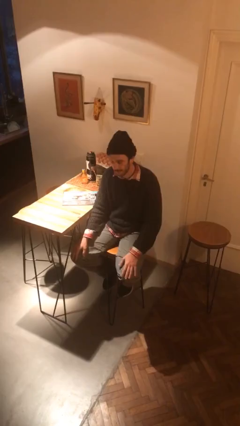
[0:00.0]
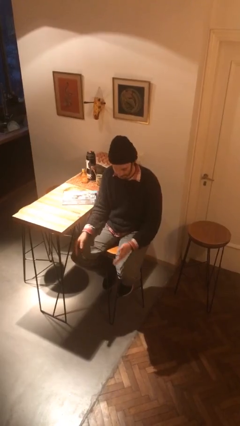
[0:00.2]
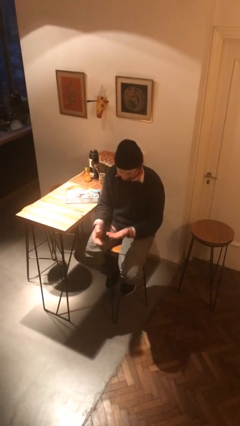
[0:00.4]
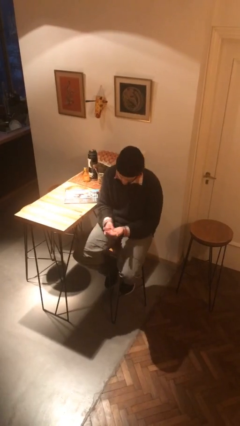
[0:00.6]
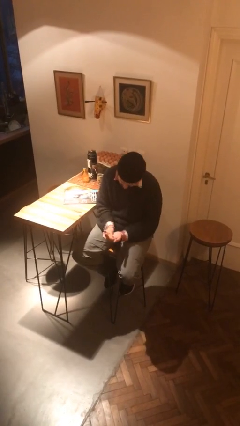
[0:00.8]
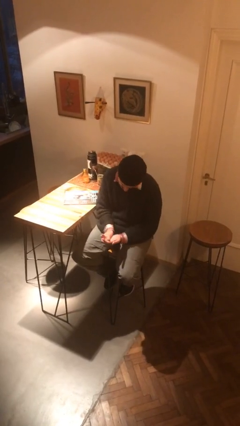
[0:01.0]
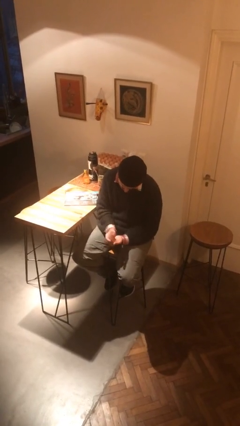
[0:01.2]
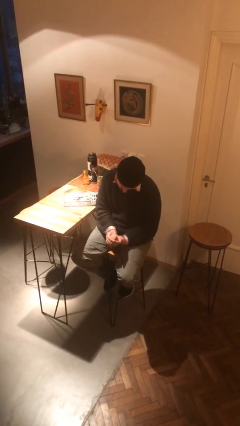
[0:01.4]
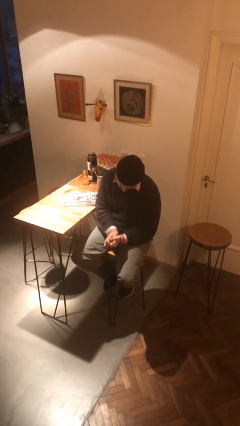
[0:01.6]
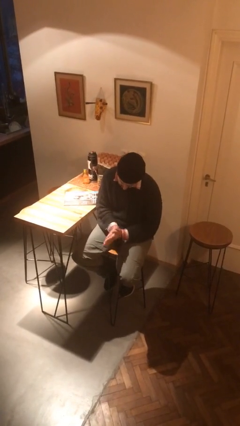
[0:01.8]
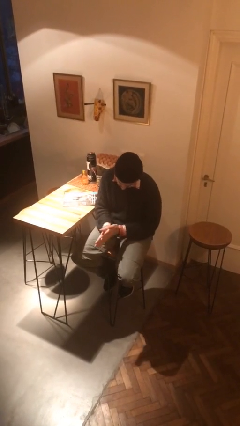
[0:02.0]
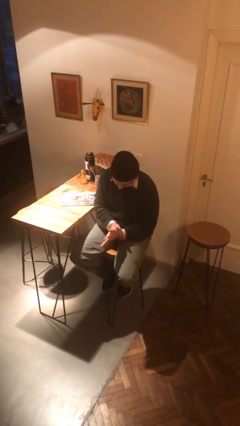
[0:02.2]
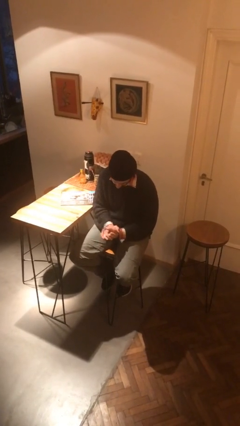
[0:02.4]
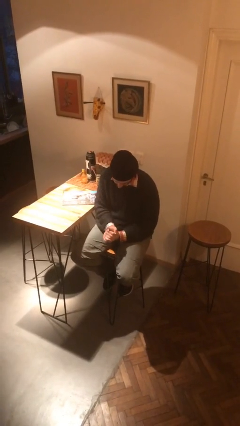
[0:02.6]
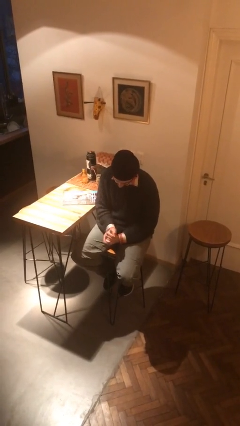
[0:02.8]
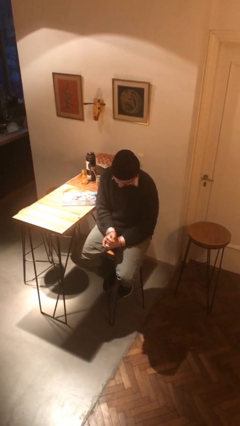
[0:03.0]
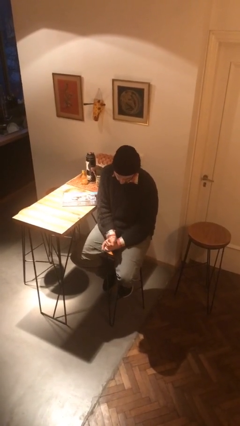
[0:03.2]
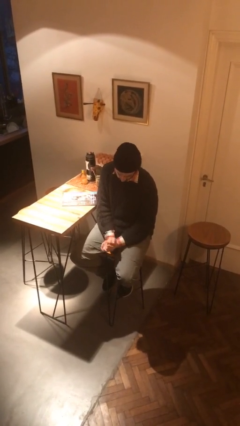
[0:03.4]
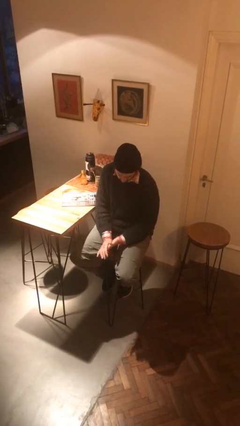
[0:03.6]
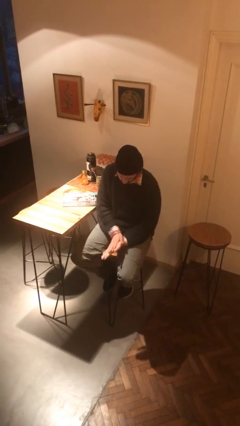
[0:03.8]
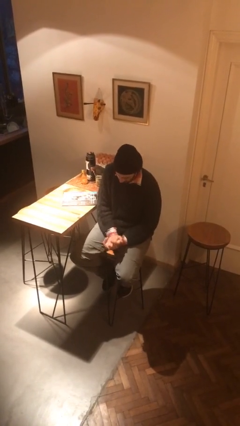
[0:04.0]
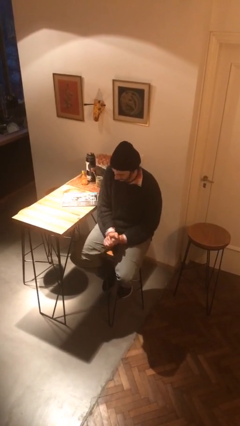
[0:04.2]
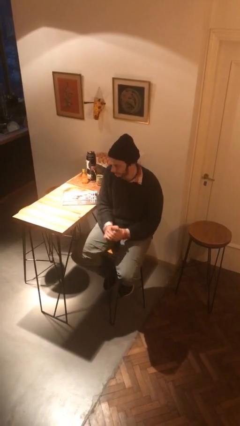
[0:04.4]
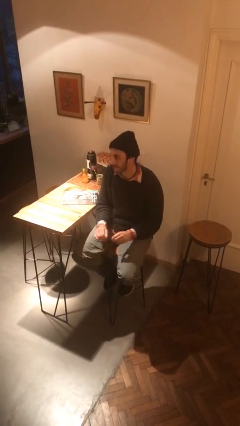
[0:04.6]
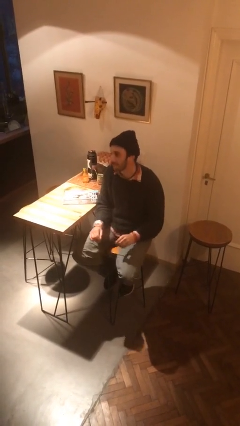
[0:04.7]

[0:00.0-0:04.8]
person looks at hands in lap

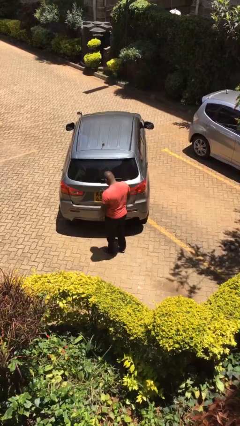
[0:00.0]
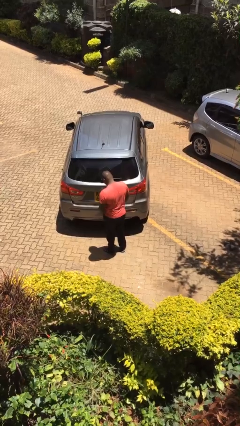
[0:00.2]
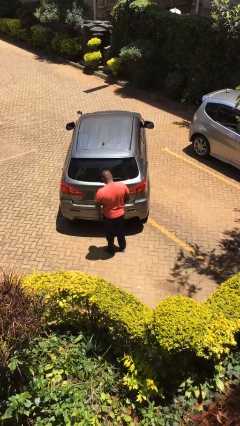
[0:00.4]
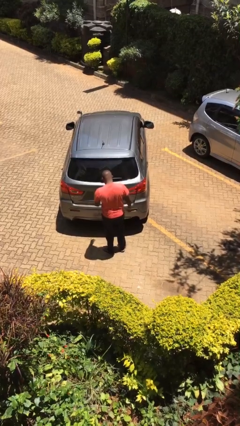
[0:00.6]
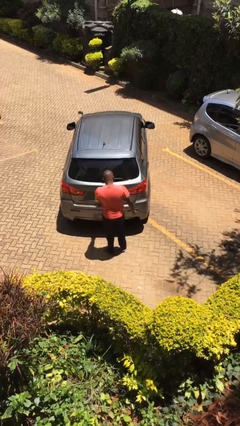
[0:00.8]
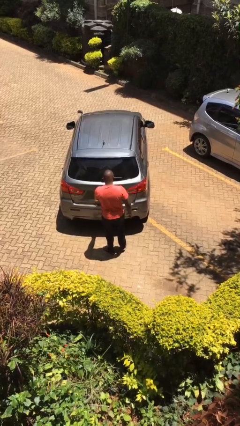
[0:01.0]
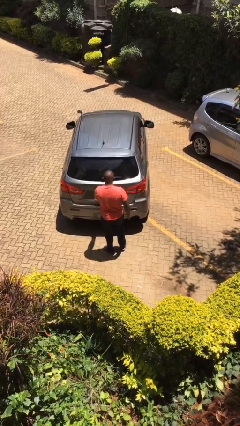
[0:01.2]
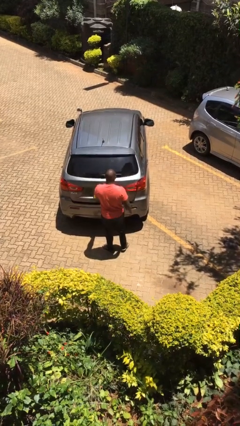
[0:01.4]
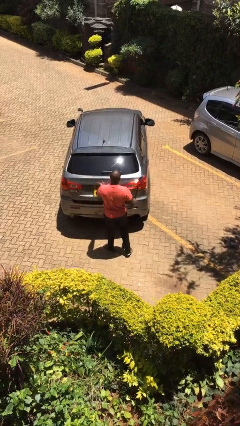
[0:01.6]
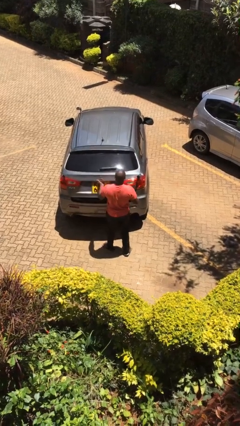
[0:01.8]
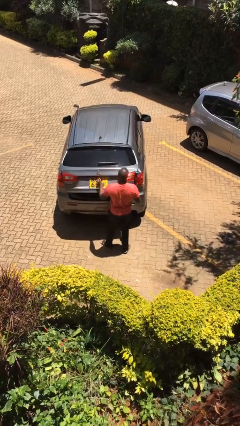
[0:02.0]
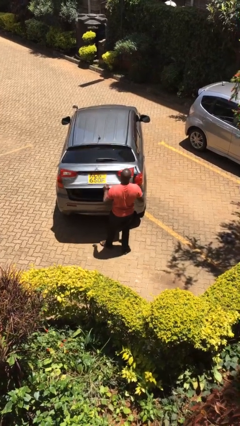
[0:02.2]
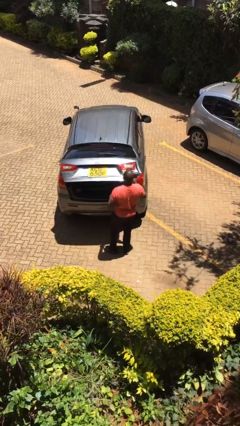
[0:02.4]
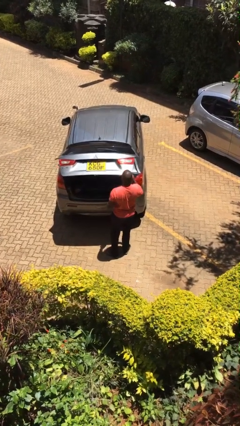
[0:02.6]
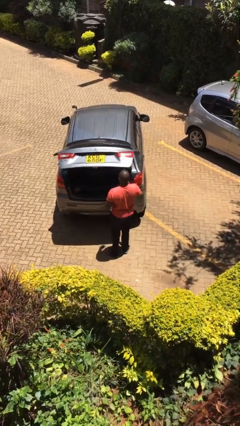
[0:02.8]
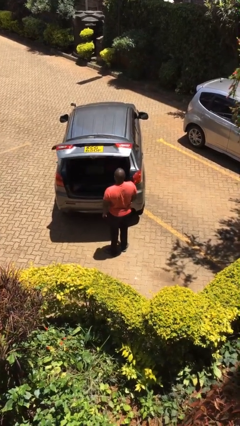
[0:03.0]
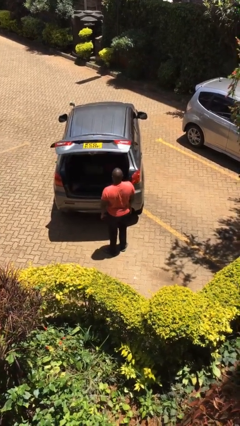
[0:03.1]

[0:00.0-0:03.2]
person opens car trunk

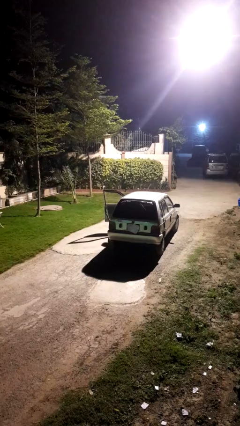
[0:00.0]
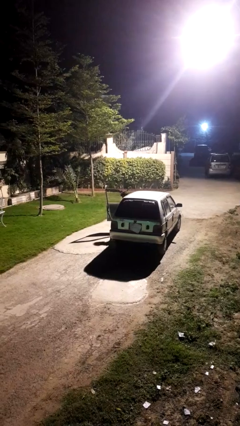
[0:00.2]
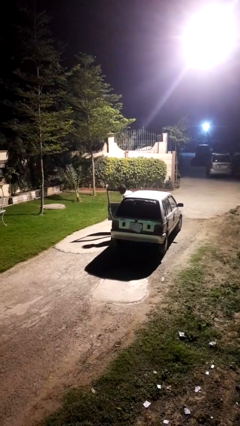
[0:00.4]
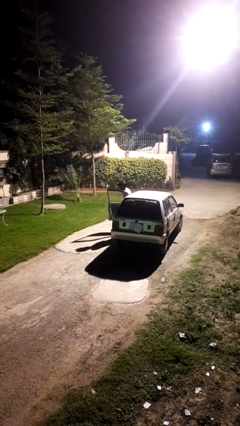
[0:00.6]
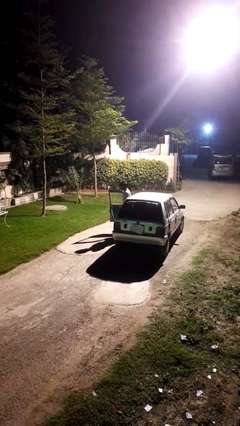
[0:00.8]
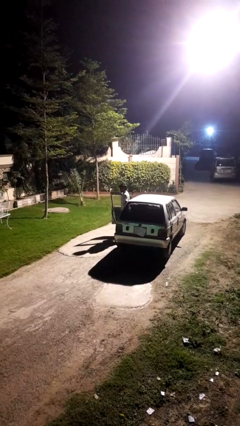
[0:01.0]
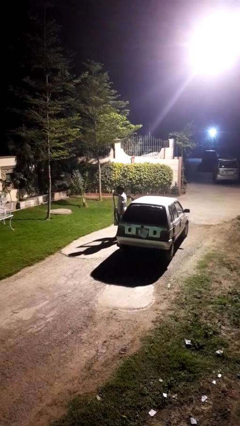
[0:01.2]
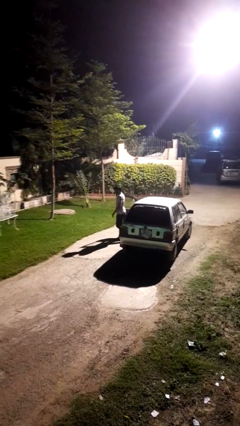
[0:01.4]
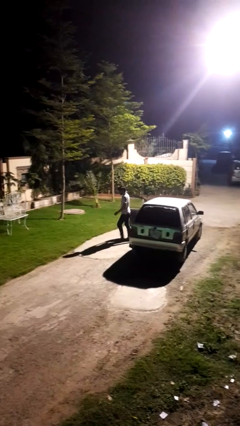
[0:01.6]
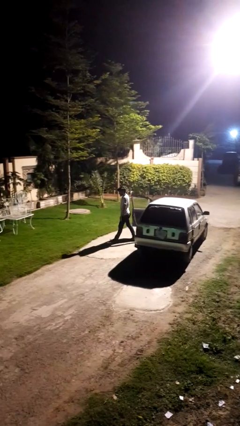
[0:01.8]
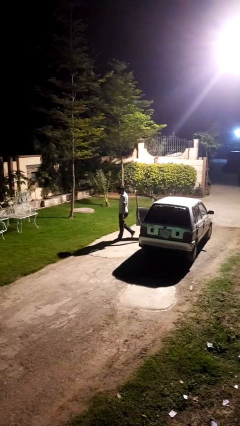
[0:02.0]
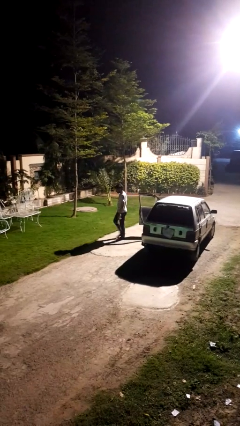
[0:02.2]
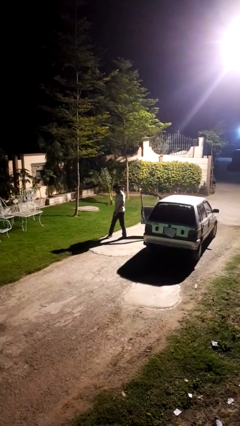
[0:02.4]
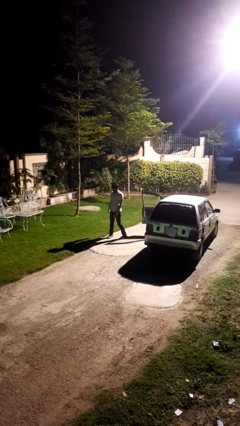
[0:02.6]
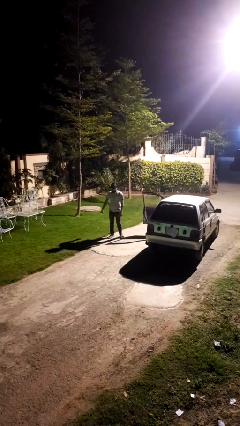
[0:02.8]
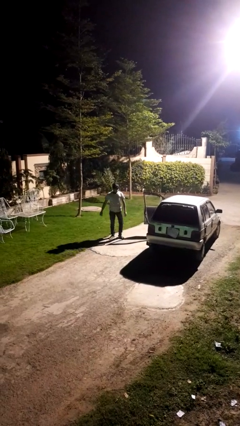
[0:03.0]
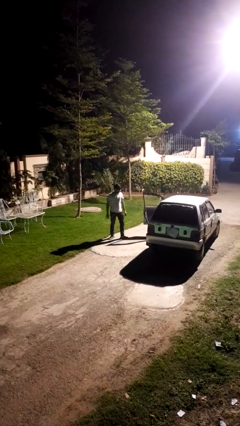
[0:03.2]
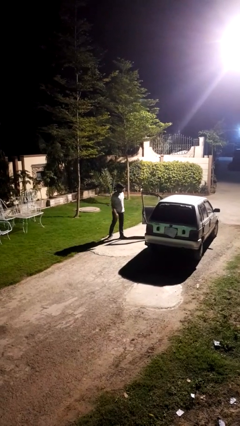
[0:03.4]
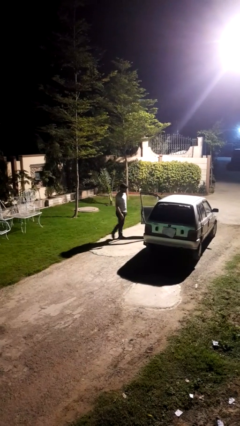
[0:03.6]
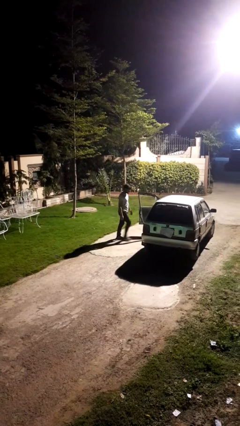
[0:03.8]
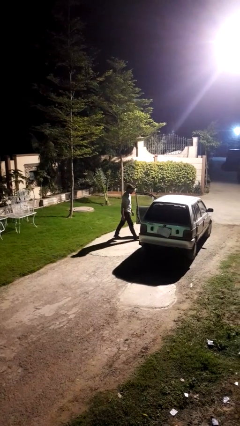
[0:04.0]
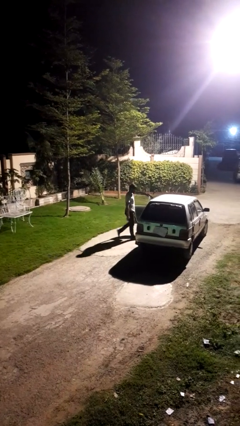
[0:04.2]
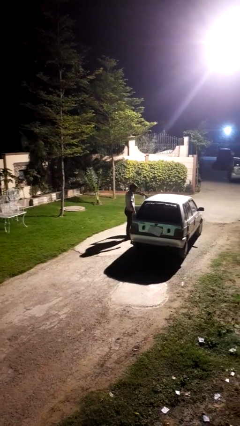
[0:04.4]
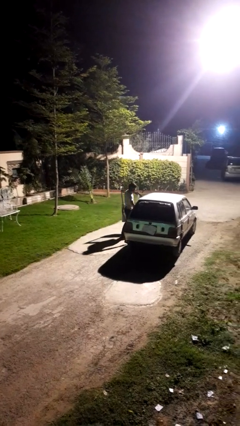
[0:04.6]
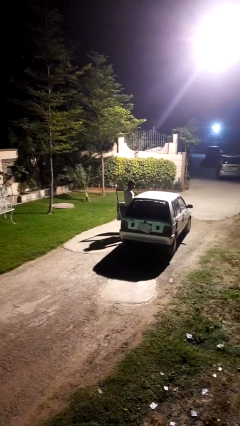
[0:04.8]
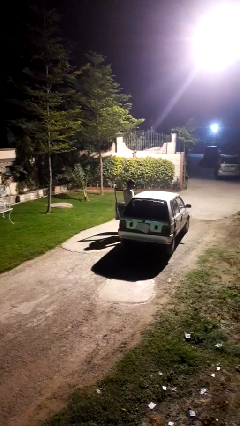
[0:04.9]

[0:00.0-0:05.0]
person exits car

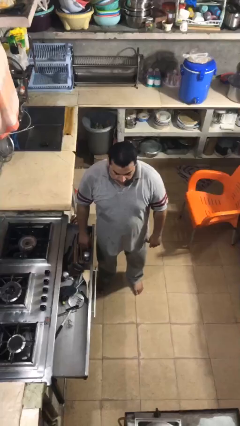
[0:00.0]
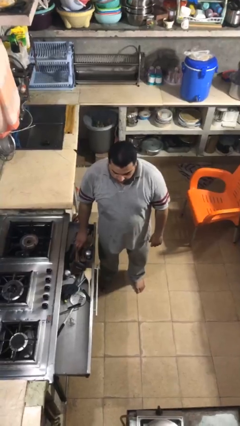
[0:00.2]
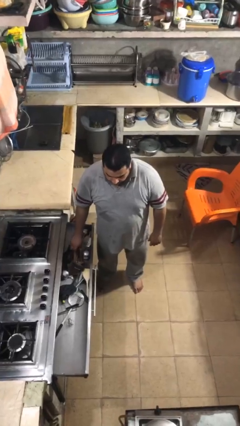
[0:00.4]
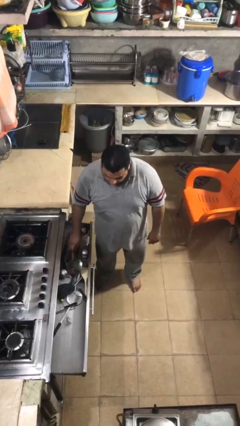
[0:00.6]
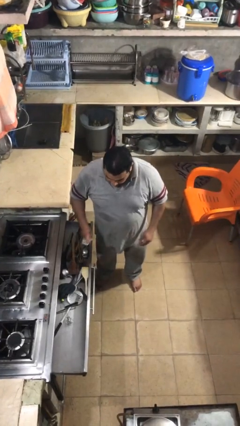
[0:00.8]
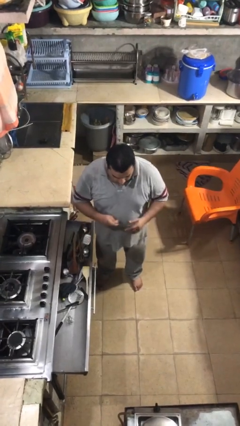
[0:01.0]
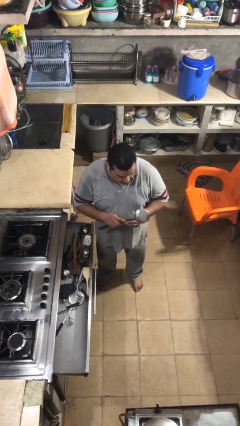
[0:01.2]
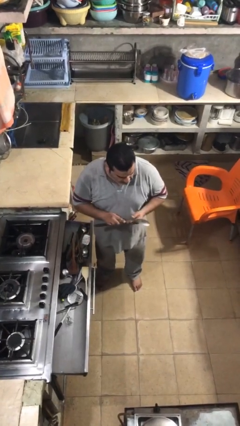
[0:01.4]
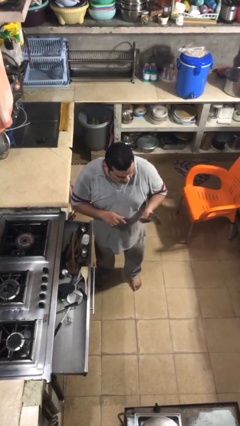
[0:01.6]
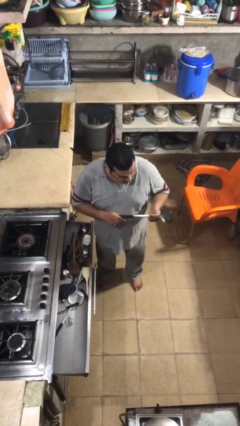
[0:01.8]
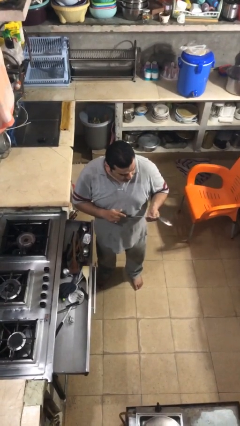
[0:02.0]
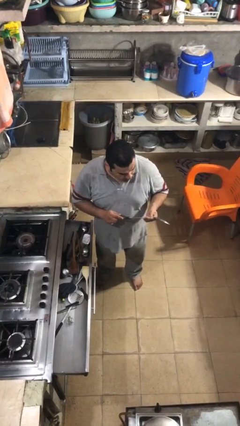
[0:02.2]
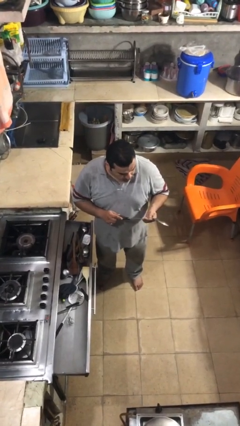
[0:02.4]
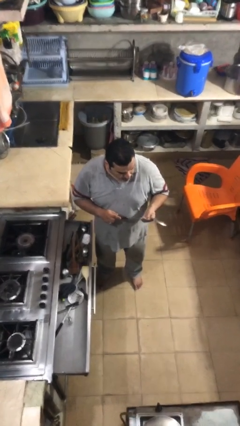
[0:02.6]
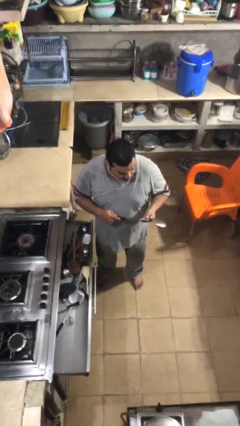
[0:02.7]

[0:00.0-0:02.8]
person takes object from kitchen drawer

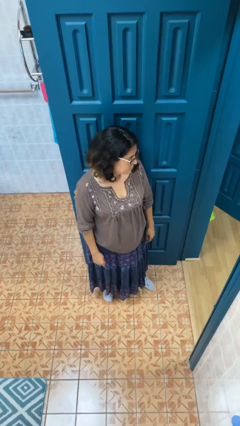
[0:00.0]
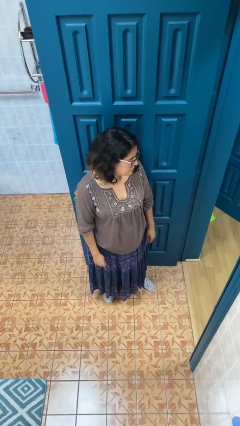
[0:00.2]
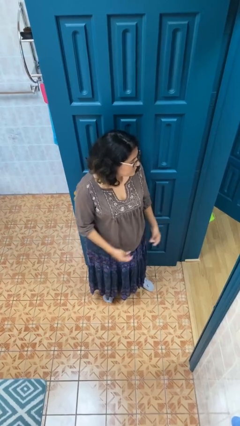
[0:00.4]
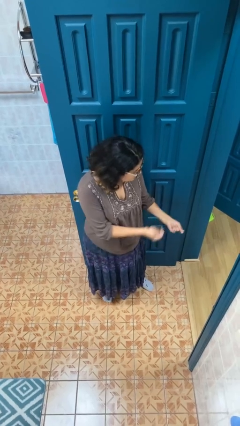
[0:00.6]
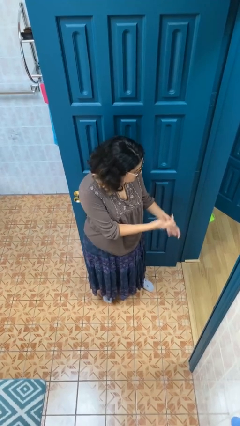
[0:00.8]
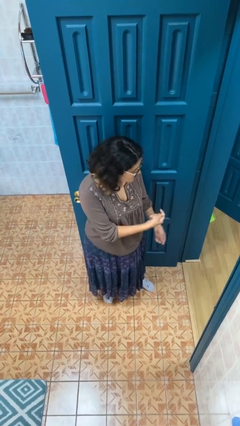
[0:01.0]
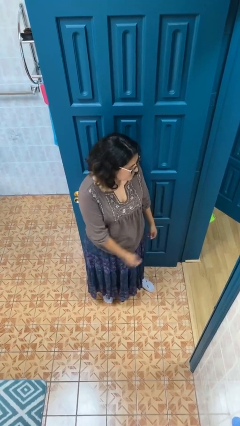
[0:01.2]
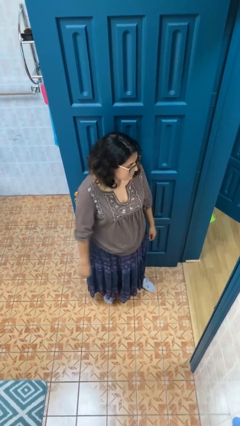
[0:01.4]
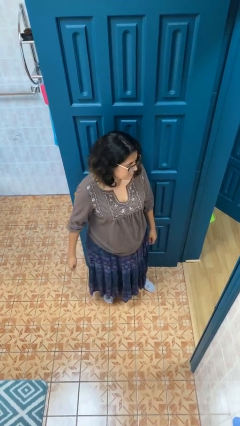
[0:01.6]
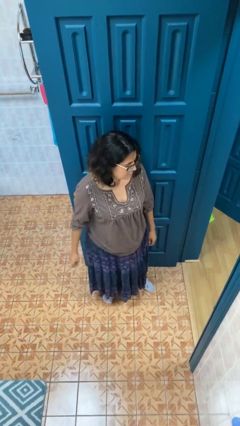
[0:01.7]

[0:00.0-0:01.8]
person snaps fingers
